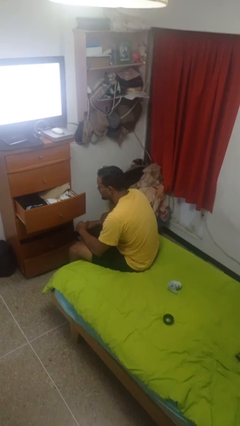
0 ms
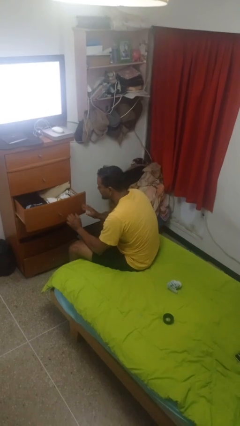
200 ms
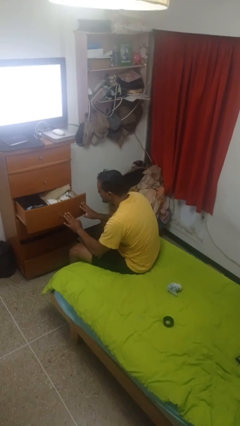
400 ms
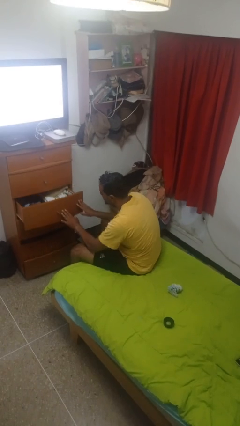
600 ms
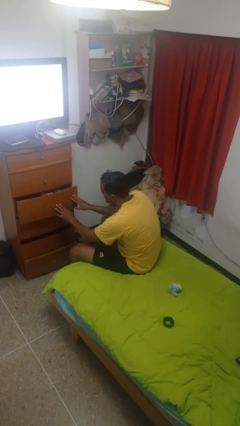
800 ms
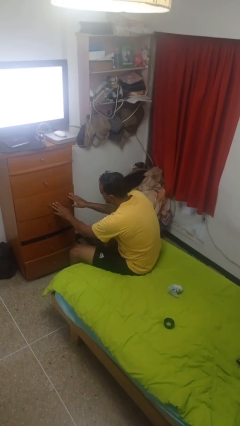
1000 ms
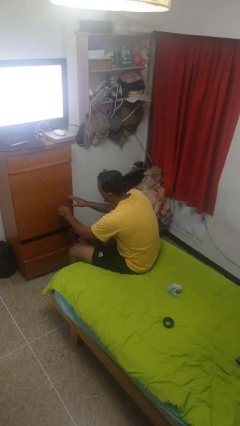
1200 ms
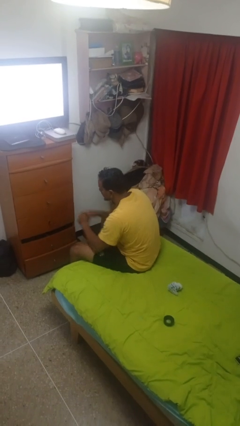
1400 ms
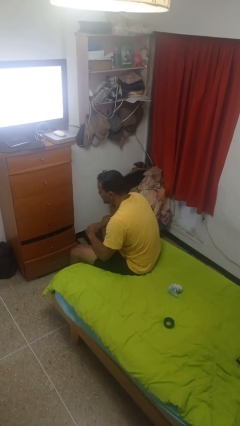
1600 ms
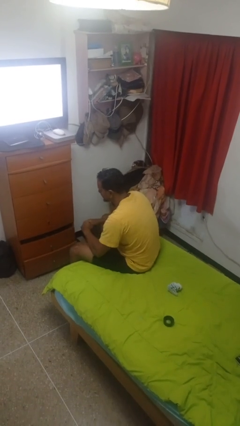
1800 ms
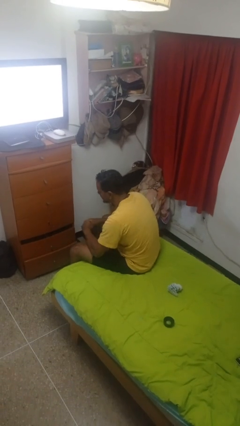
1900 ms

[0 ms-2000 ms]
person closes dresser drawer

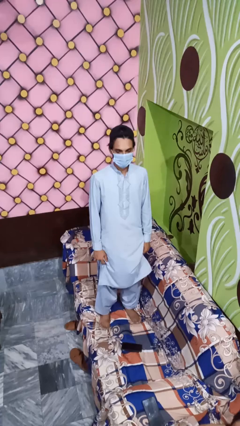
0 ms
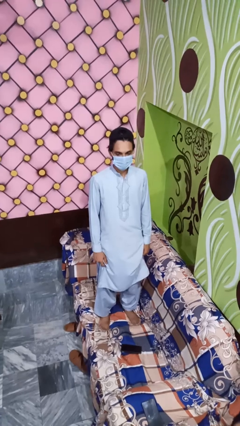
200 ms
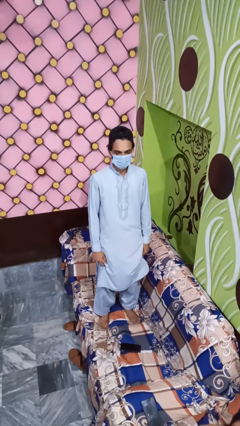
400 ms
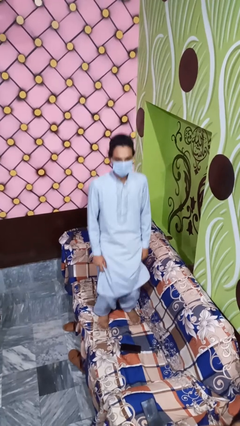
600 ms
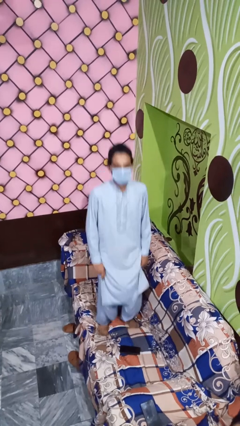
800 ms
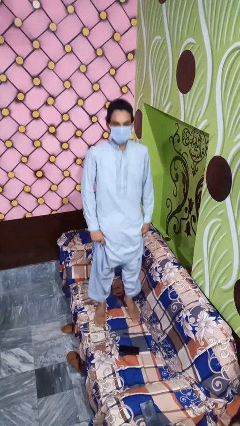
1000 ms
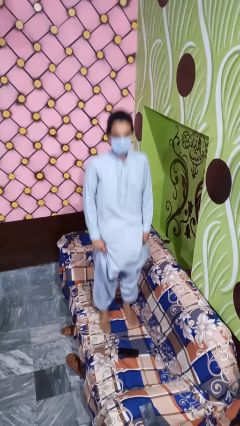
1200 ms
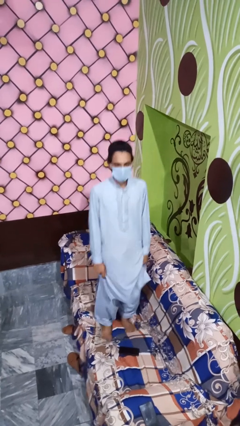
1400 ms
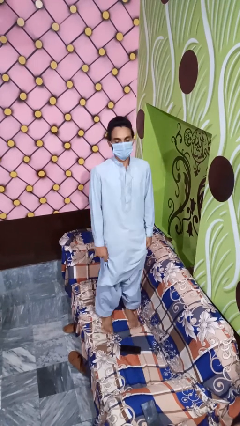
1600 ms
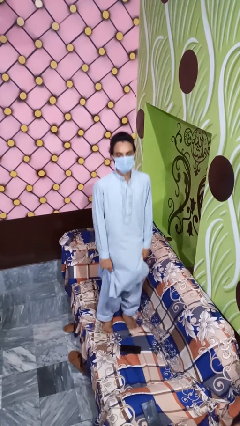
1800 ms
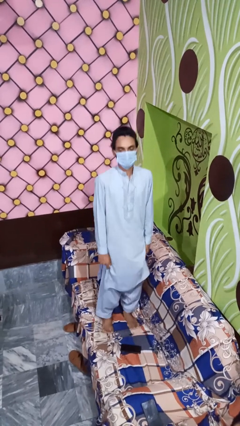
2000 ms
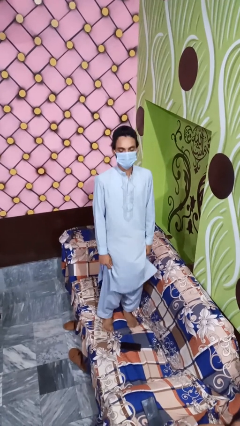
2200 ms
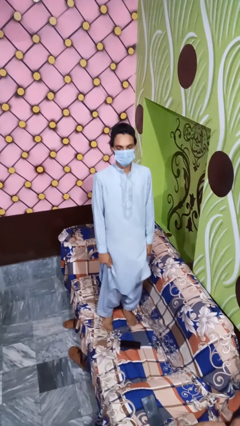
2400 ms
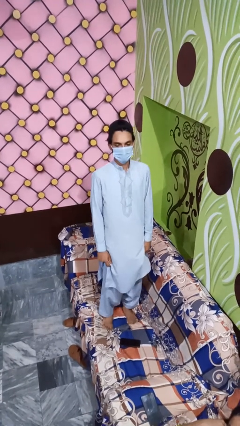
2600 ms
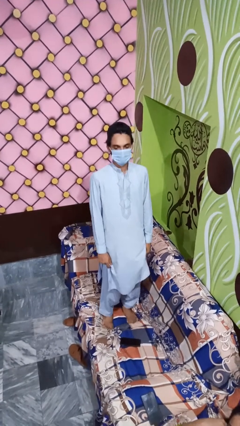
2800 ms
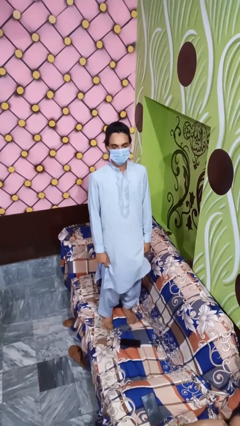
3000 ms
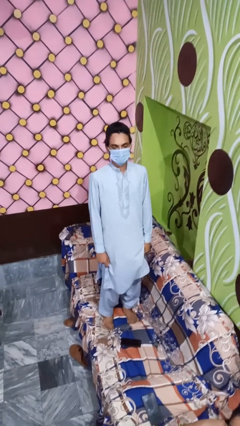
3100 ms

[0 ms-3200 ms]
person jumps on couch

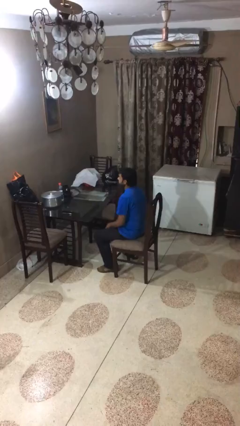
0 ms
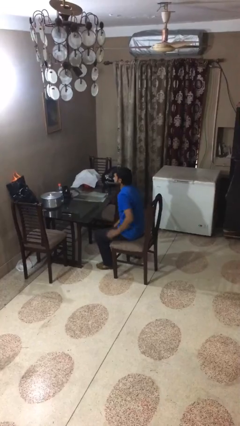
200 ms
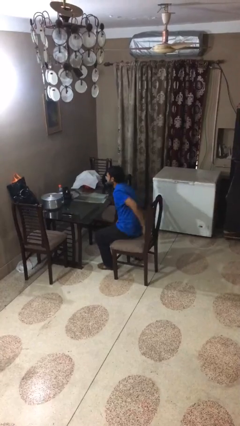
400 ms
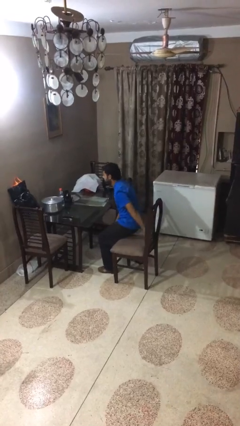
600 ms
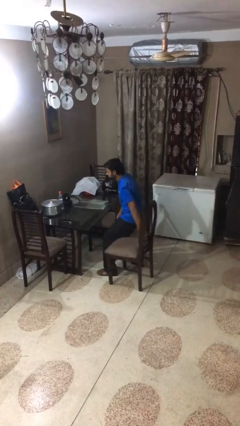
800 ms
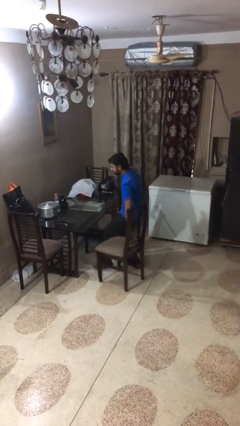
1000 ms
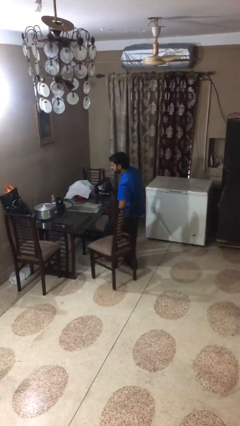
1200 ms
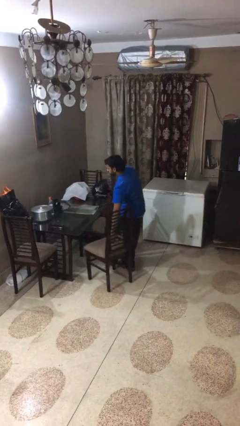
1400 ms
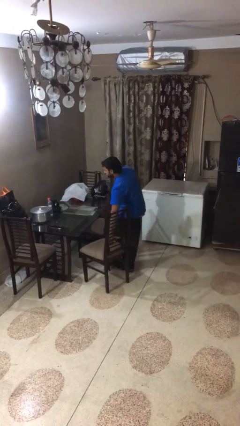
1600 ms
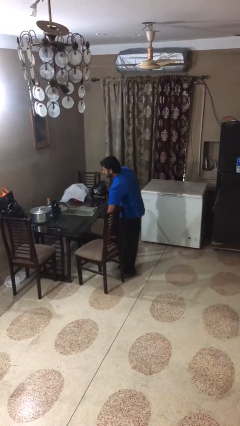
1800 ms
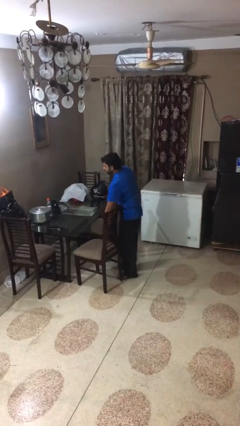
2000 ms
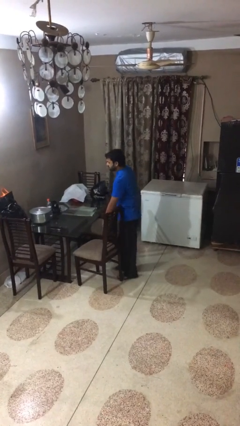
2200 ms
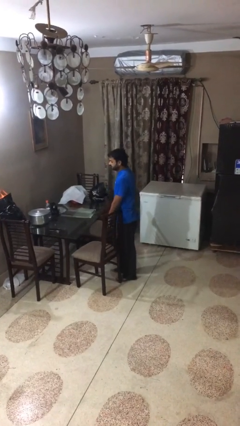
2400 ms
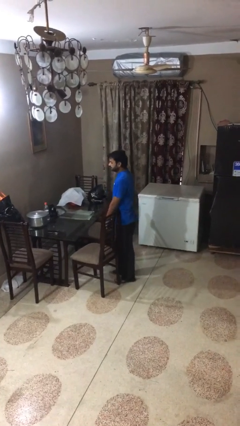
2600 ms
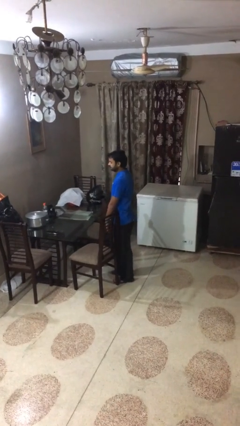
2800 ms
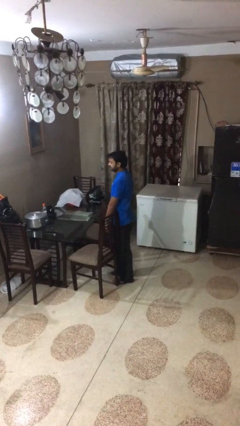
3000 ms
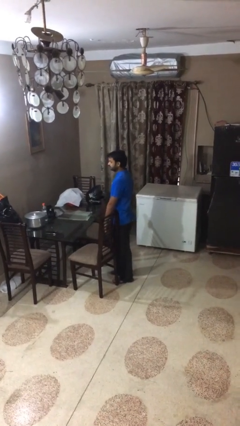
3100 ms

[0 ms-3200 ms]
person stands up

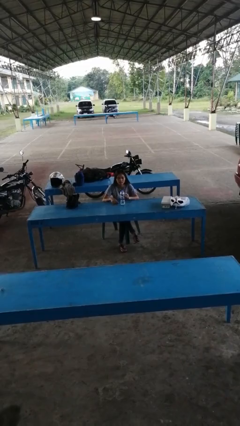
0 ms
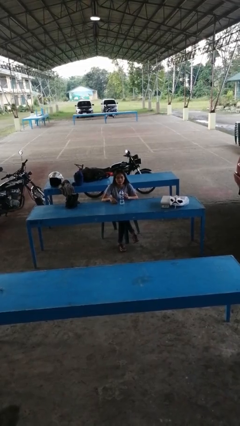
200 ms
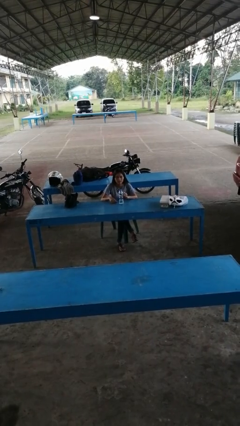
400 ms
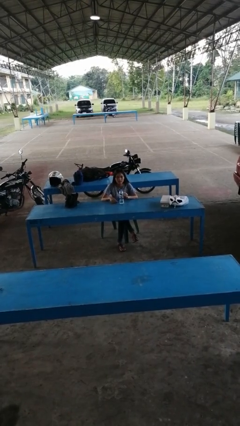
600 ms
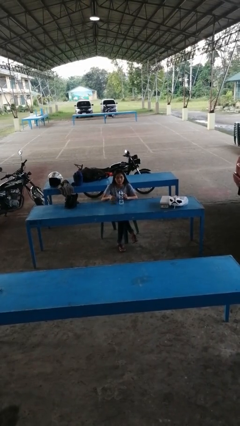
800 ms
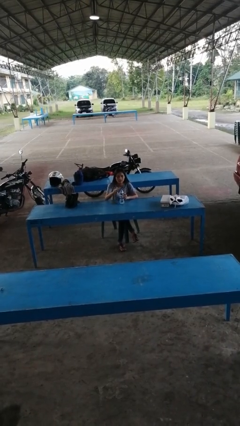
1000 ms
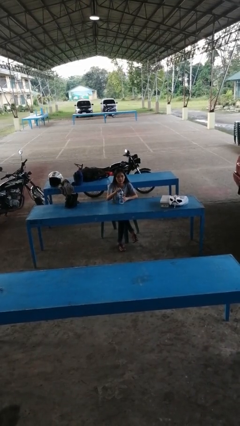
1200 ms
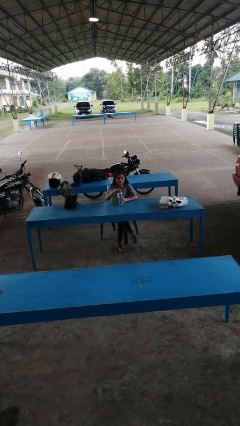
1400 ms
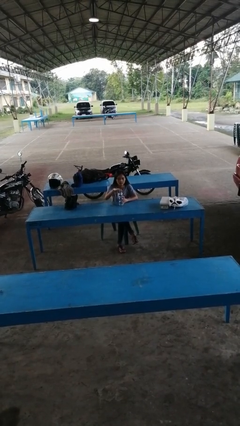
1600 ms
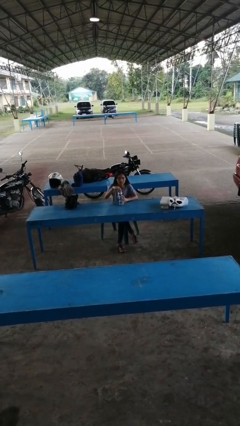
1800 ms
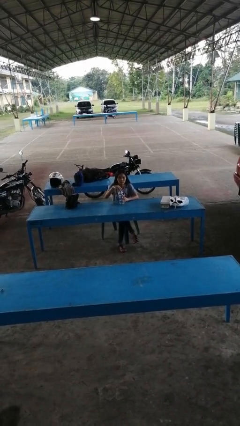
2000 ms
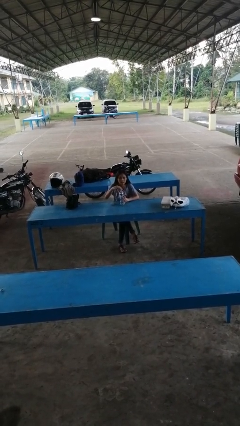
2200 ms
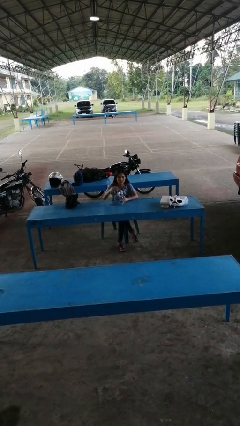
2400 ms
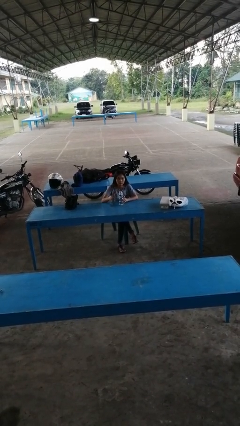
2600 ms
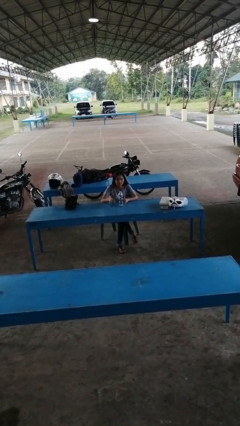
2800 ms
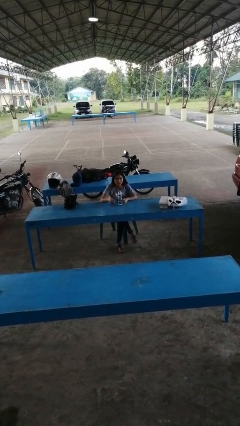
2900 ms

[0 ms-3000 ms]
person unscrews lid from bottle

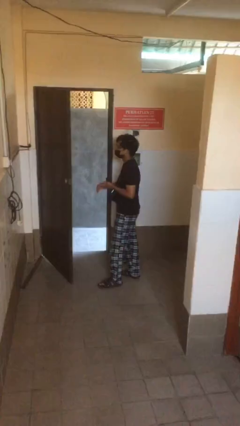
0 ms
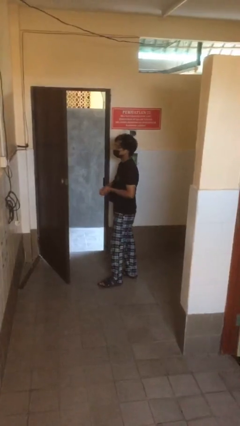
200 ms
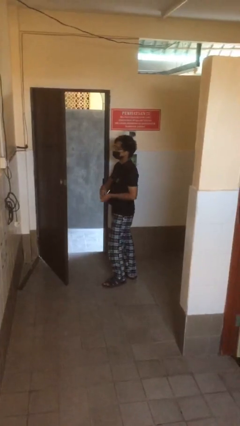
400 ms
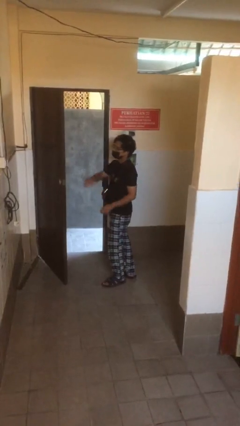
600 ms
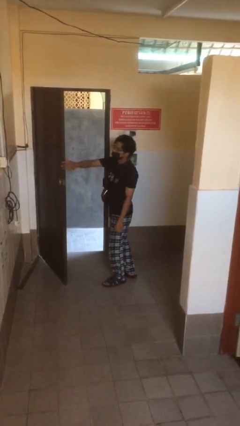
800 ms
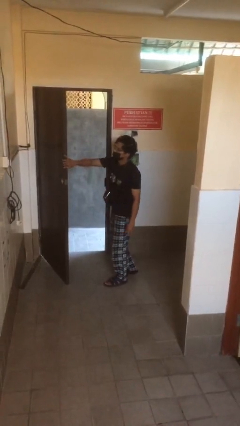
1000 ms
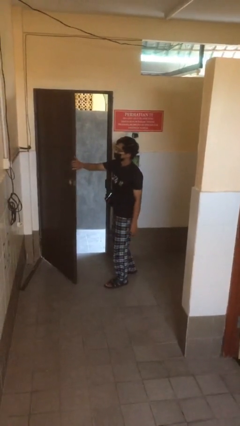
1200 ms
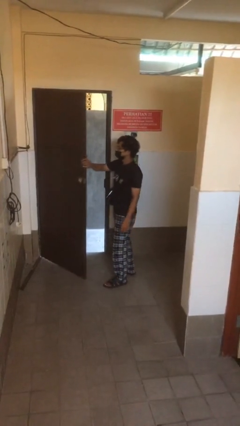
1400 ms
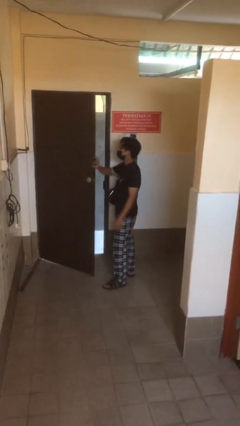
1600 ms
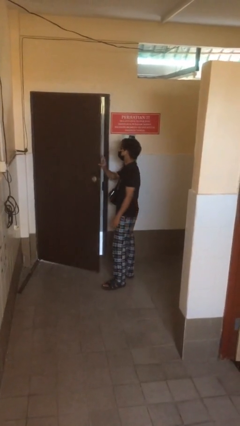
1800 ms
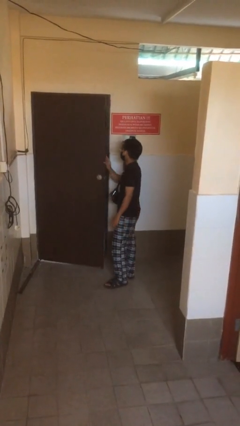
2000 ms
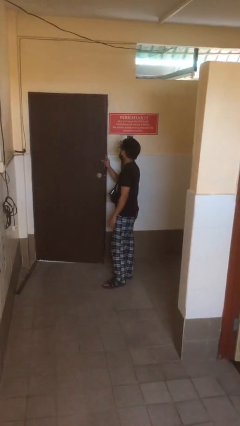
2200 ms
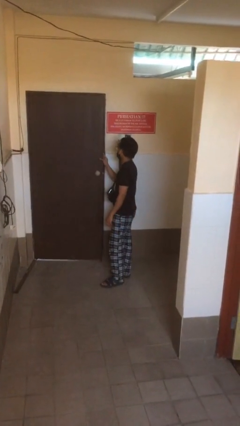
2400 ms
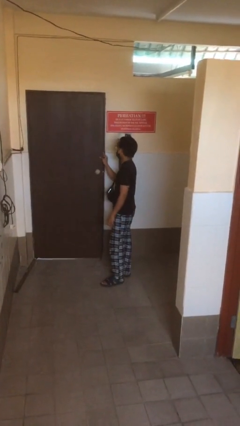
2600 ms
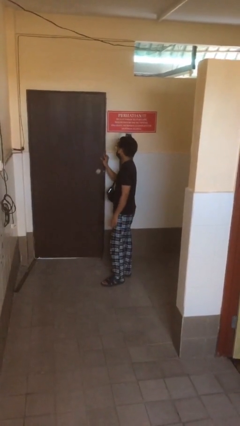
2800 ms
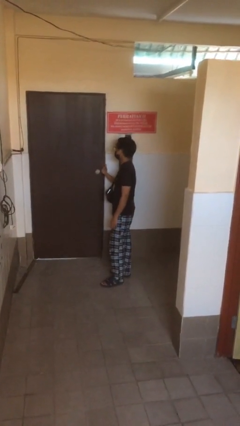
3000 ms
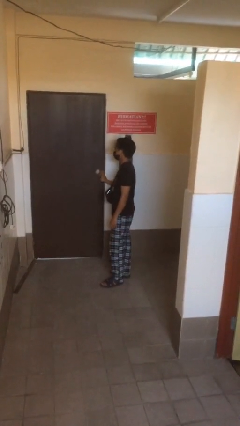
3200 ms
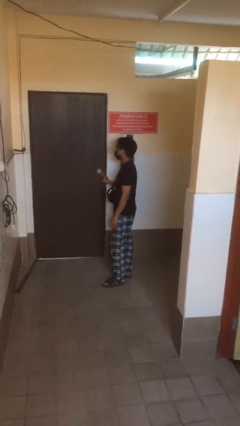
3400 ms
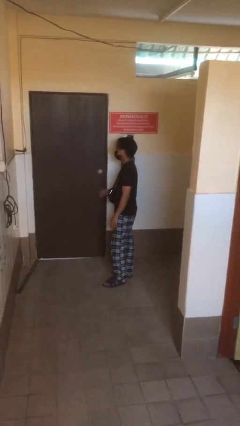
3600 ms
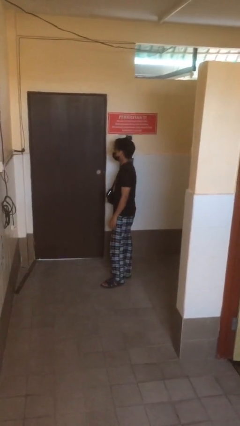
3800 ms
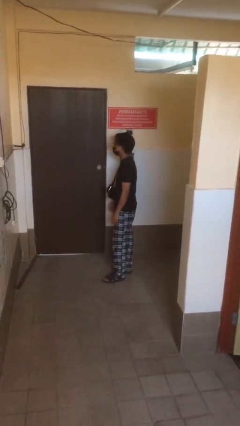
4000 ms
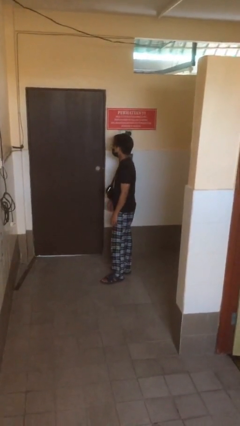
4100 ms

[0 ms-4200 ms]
person closes facility door

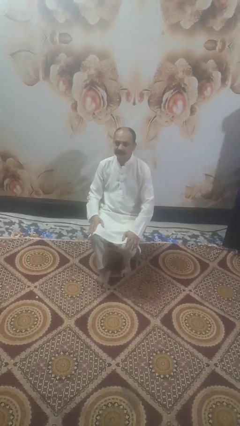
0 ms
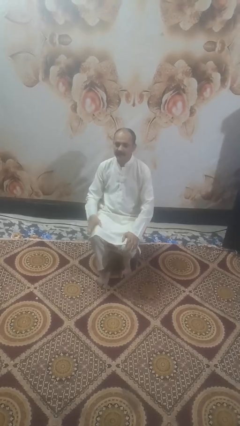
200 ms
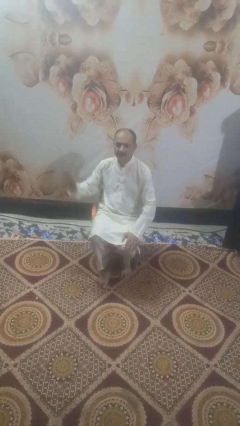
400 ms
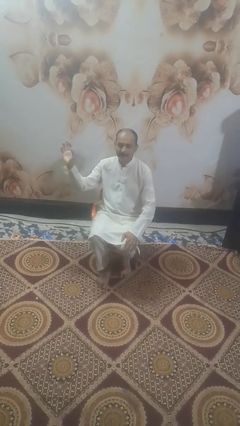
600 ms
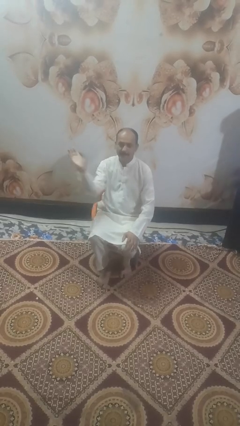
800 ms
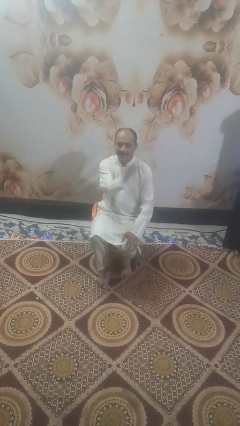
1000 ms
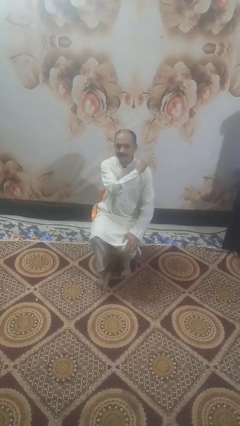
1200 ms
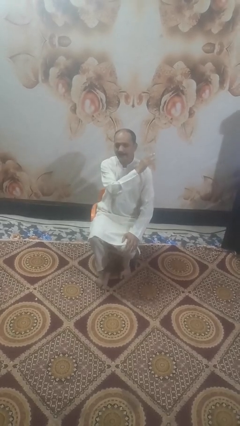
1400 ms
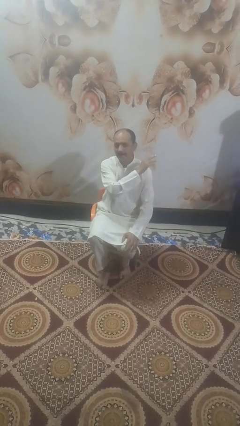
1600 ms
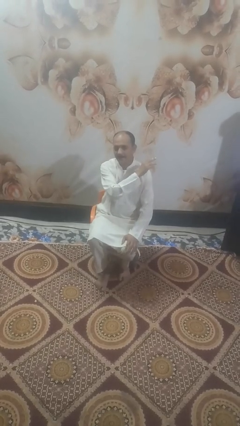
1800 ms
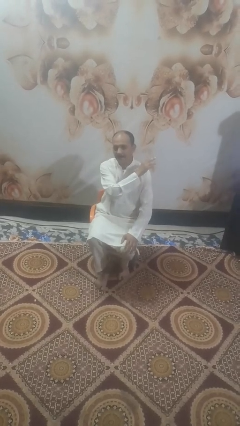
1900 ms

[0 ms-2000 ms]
person gestures swipe left
